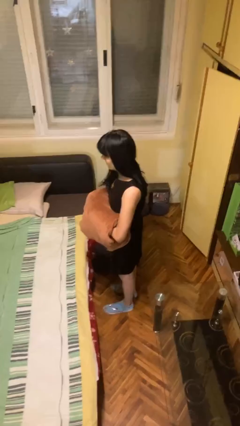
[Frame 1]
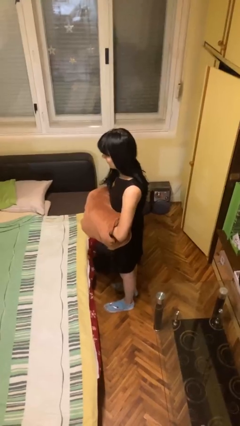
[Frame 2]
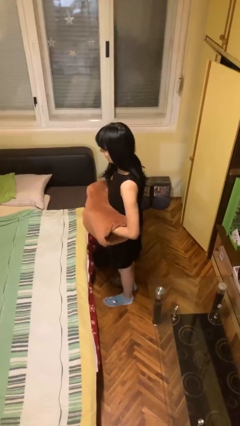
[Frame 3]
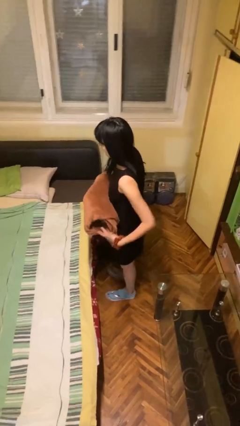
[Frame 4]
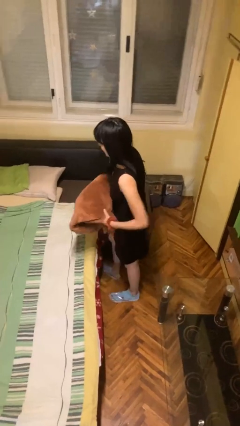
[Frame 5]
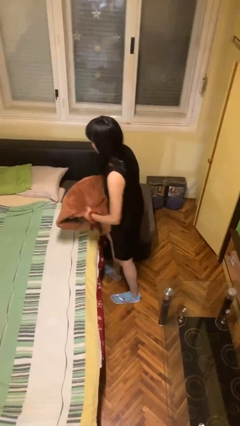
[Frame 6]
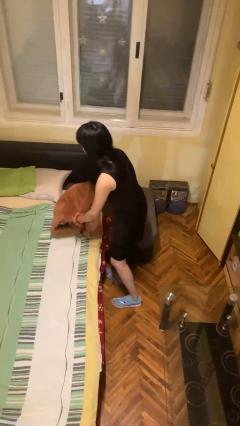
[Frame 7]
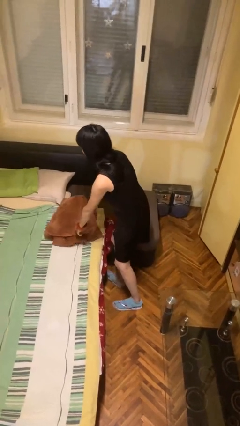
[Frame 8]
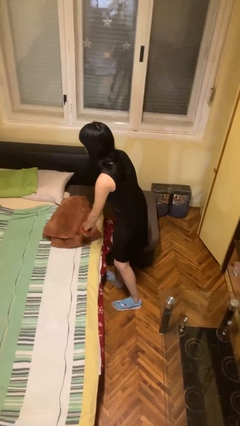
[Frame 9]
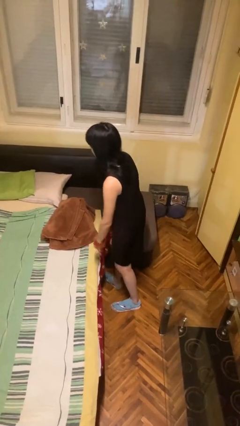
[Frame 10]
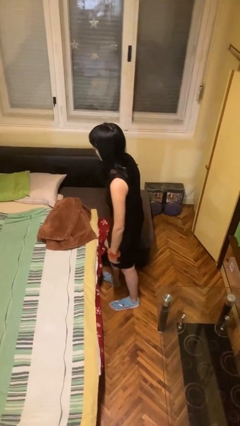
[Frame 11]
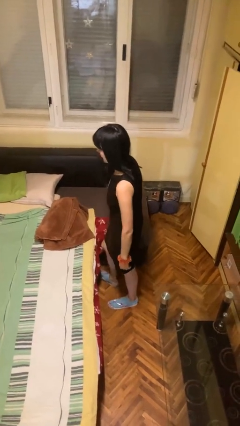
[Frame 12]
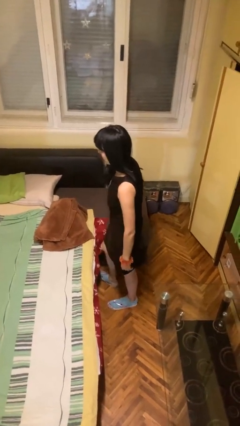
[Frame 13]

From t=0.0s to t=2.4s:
person puts down object on bed

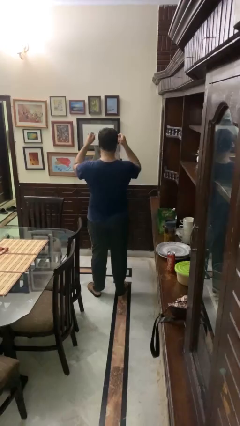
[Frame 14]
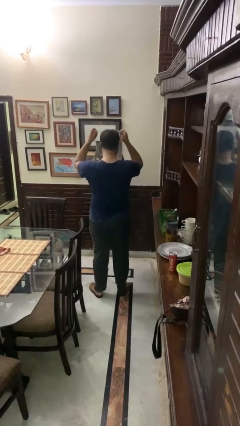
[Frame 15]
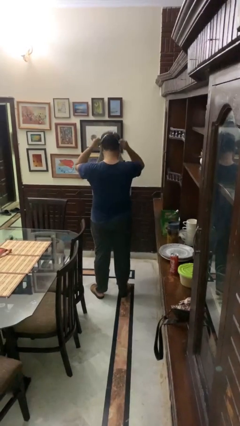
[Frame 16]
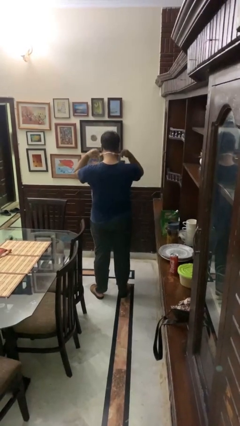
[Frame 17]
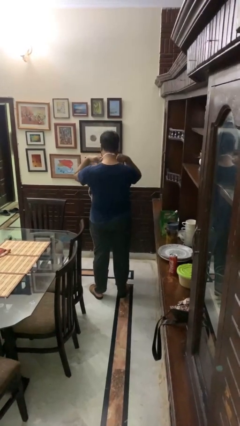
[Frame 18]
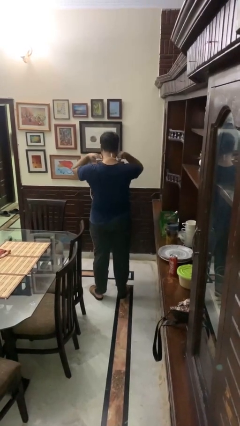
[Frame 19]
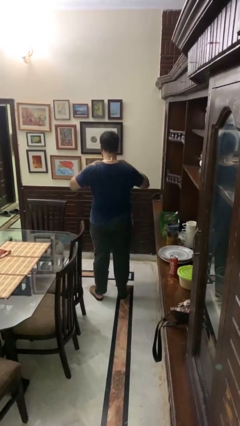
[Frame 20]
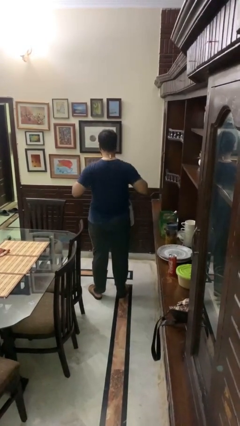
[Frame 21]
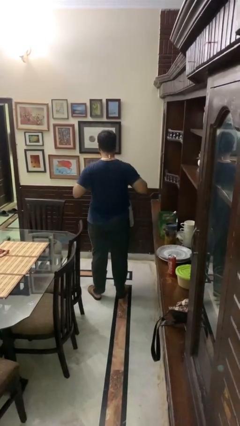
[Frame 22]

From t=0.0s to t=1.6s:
person puts on apron

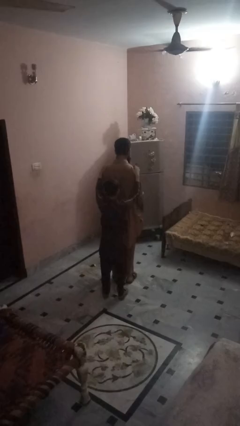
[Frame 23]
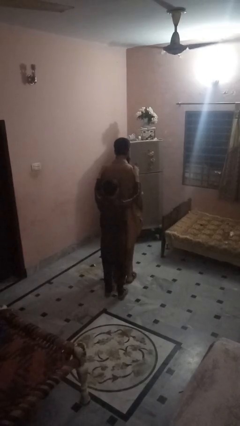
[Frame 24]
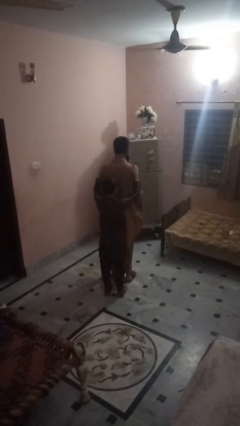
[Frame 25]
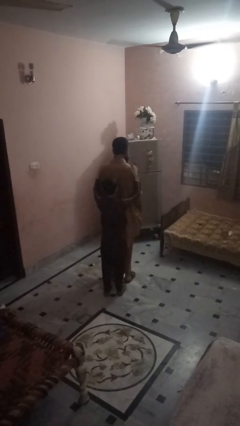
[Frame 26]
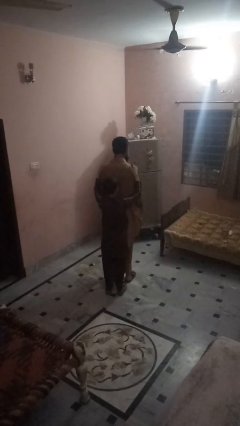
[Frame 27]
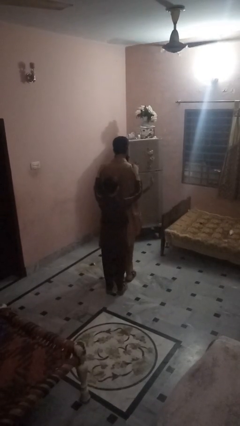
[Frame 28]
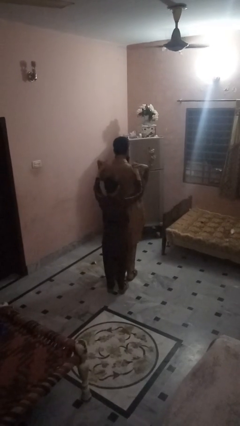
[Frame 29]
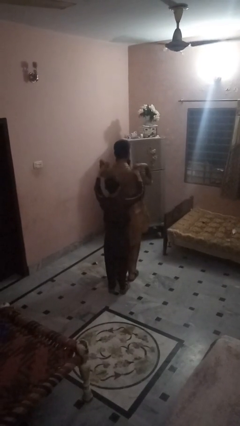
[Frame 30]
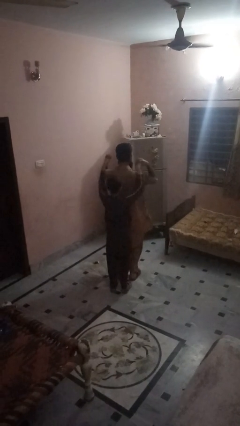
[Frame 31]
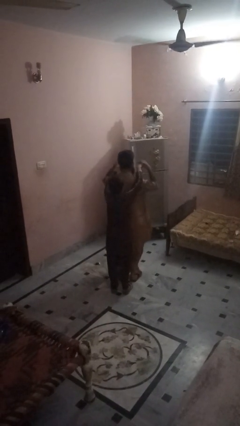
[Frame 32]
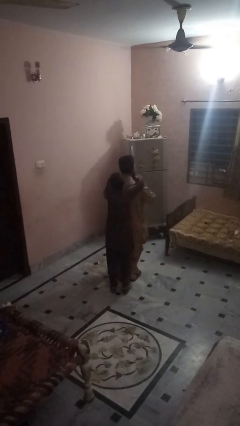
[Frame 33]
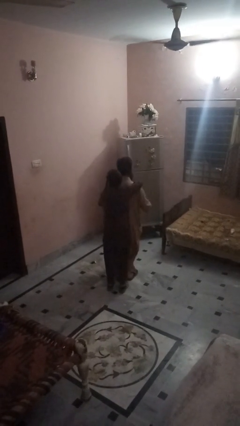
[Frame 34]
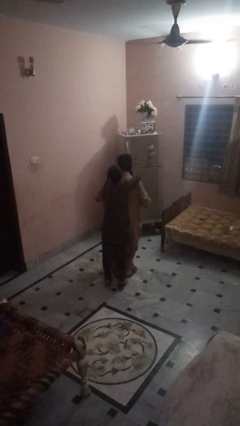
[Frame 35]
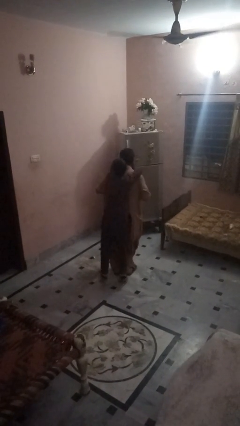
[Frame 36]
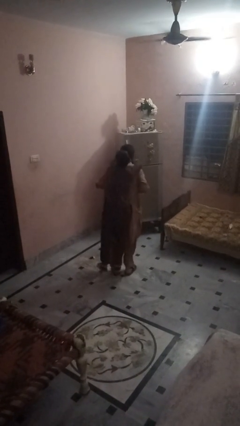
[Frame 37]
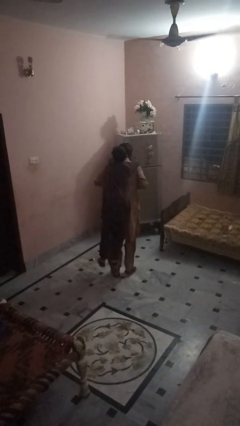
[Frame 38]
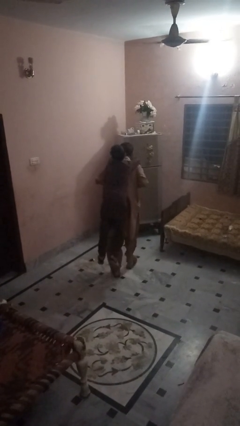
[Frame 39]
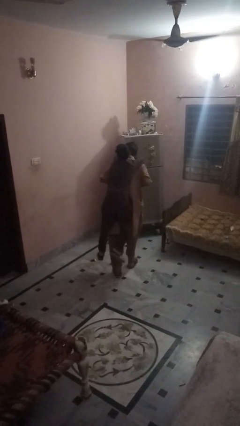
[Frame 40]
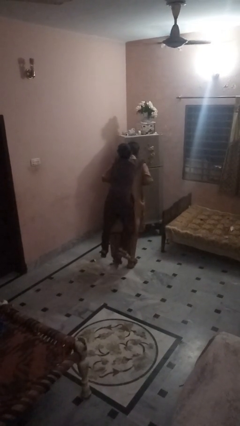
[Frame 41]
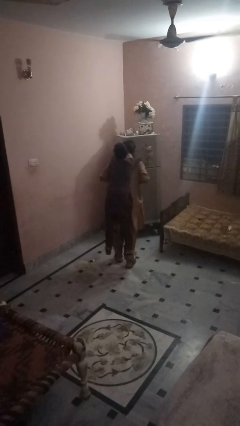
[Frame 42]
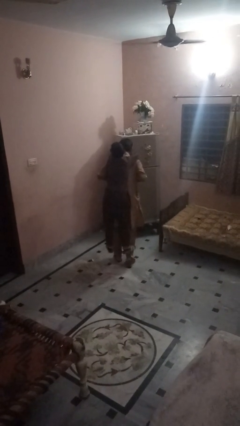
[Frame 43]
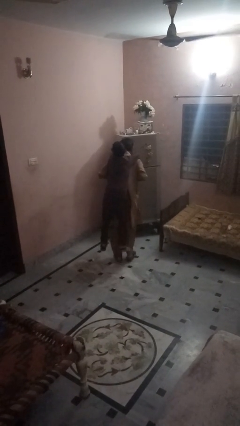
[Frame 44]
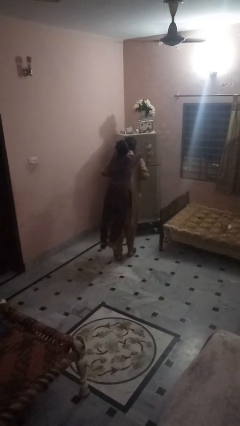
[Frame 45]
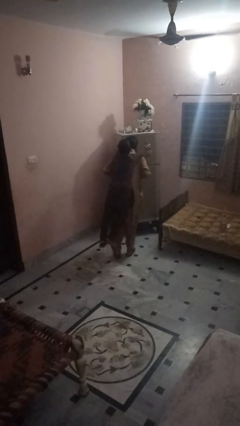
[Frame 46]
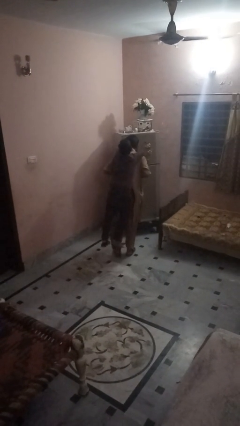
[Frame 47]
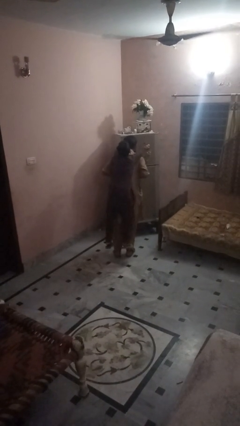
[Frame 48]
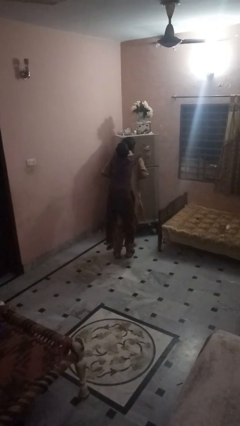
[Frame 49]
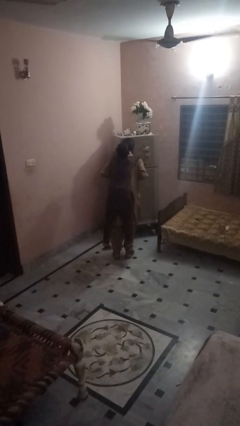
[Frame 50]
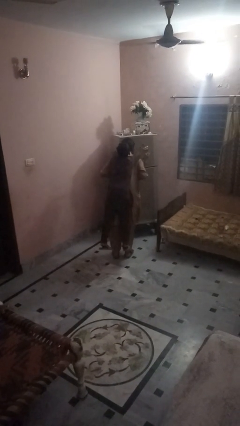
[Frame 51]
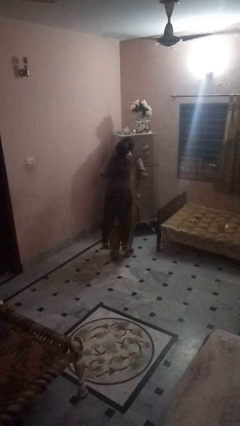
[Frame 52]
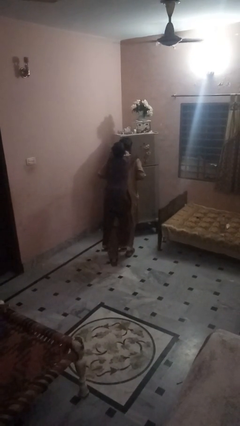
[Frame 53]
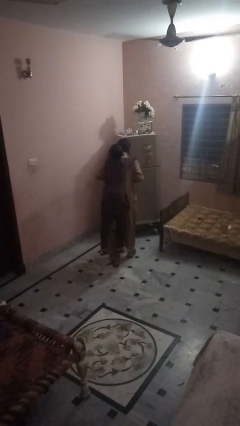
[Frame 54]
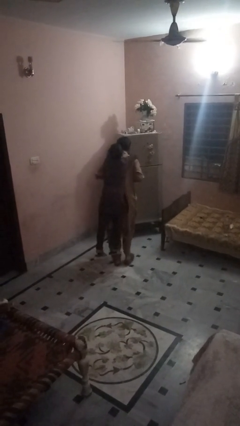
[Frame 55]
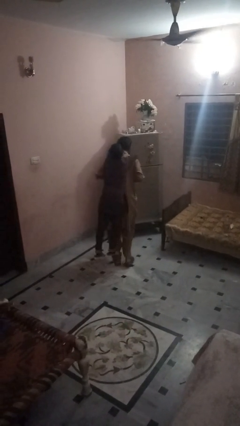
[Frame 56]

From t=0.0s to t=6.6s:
person carries person on back

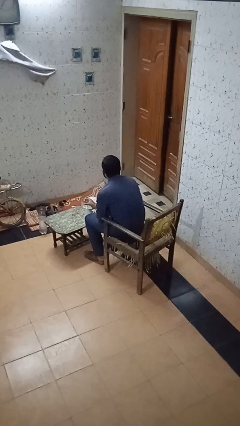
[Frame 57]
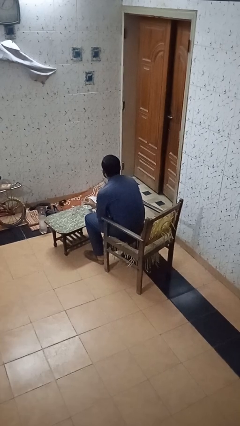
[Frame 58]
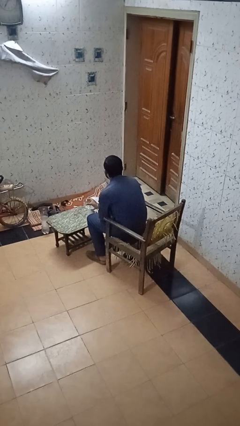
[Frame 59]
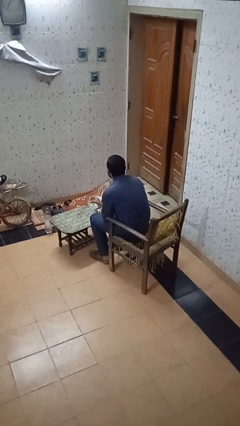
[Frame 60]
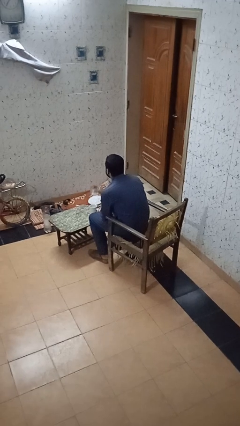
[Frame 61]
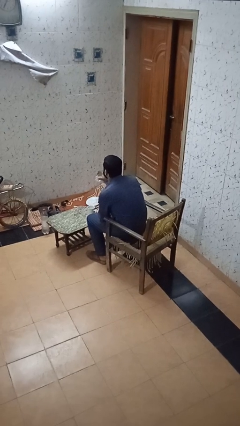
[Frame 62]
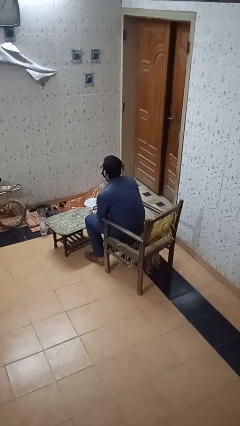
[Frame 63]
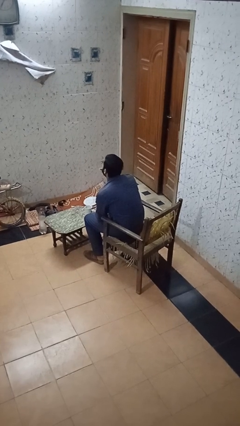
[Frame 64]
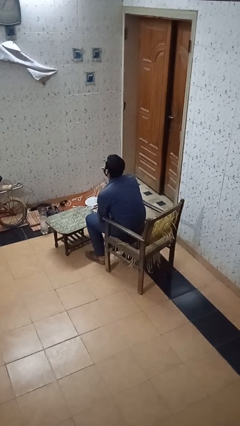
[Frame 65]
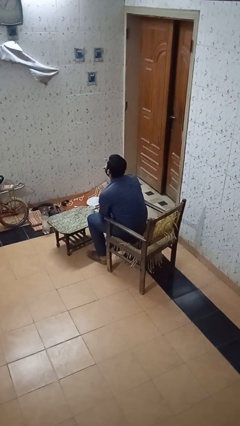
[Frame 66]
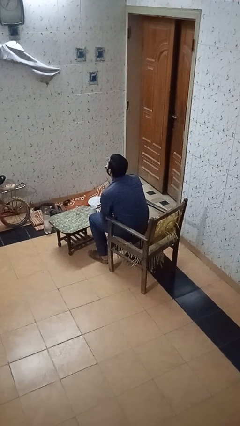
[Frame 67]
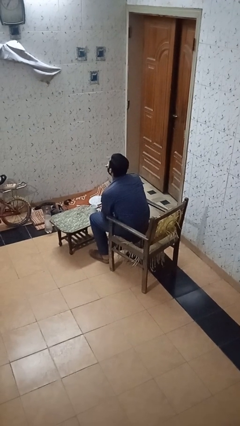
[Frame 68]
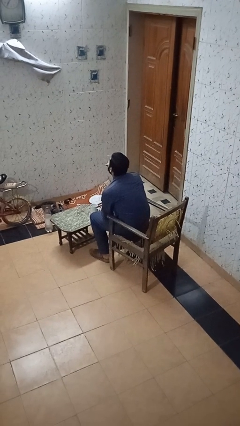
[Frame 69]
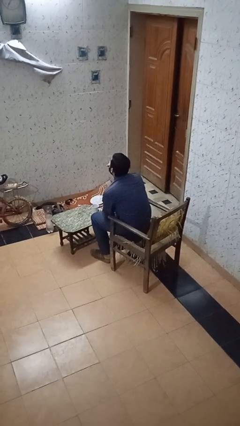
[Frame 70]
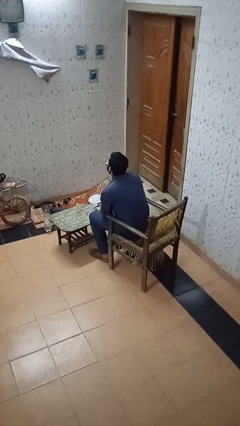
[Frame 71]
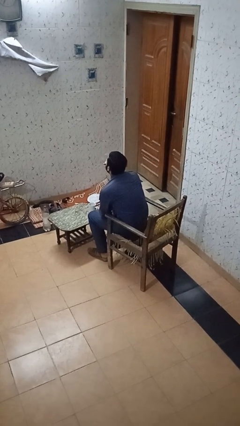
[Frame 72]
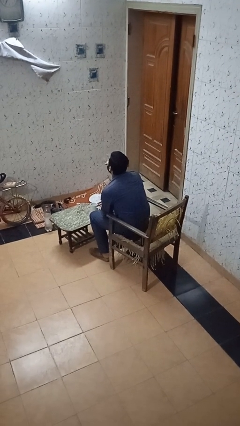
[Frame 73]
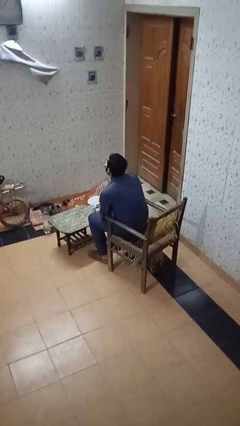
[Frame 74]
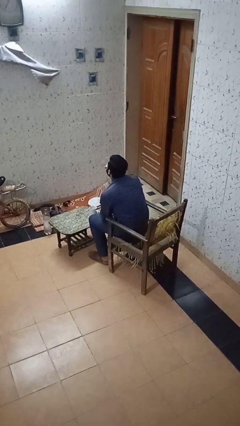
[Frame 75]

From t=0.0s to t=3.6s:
person drinks from shotglass

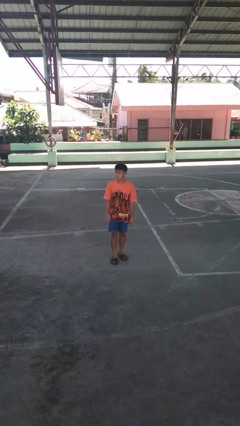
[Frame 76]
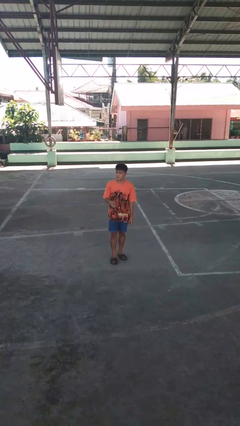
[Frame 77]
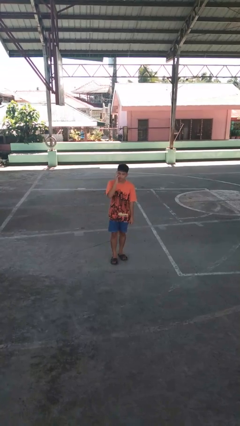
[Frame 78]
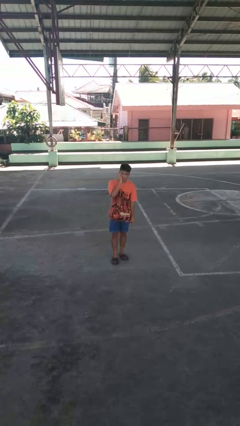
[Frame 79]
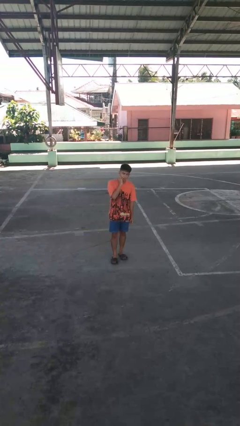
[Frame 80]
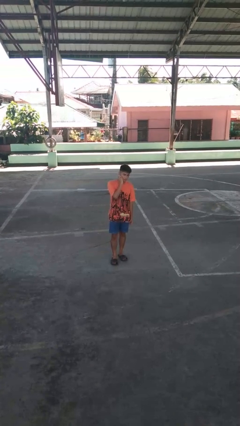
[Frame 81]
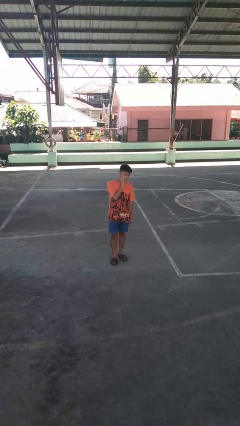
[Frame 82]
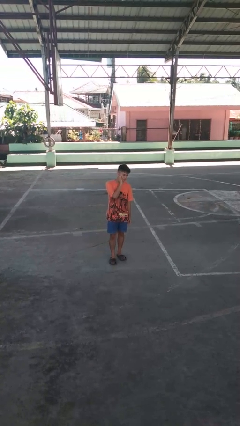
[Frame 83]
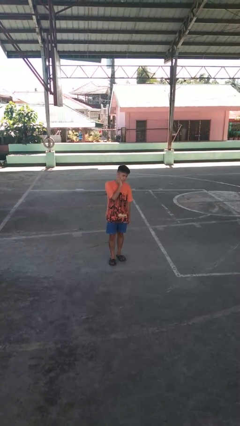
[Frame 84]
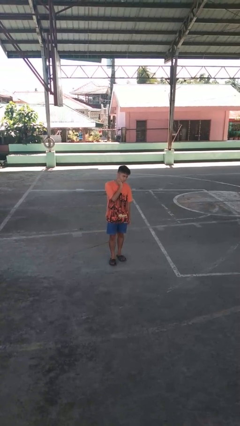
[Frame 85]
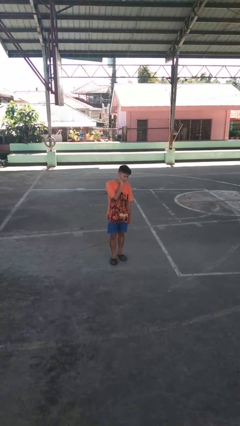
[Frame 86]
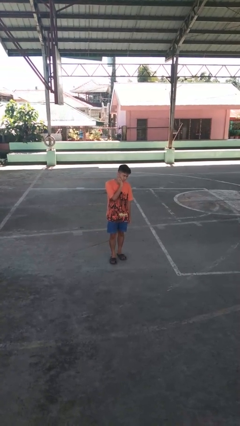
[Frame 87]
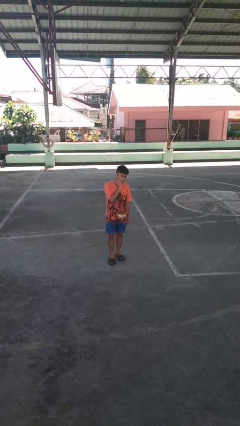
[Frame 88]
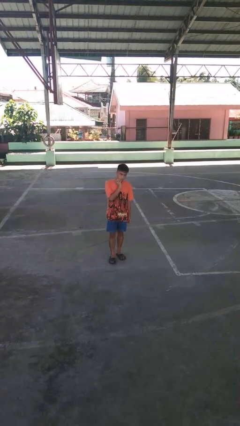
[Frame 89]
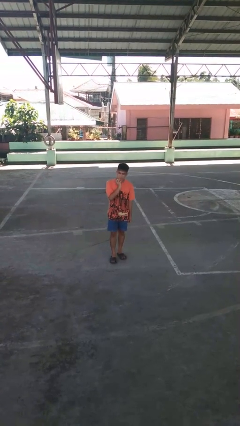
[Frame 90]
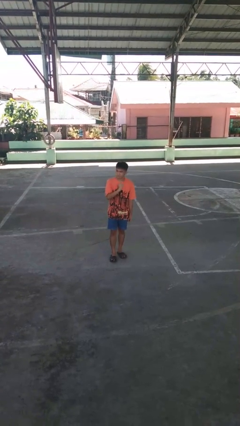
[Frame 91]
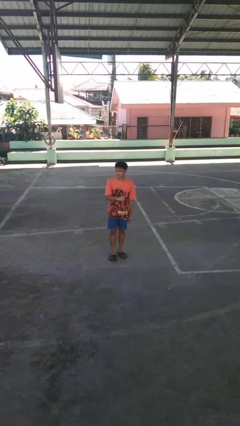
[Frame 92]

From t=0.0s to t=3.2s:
person scratches face
